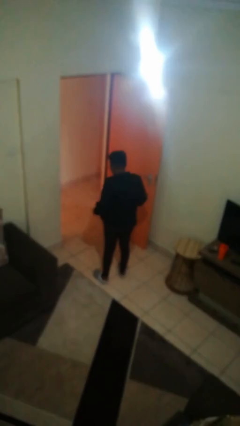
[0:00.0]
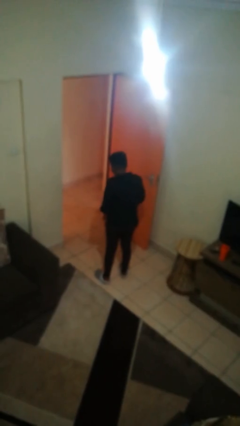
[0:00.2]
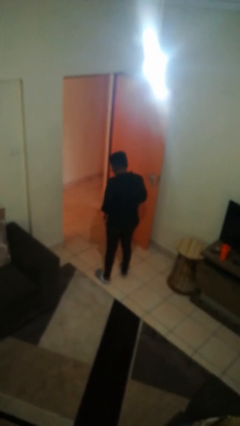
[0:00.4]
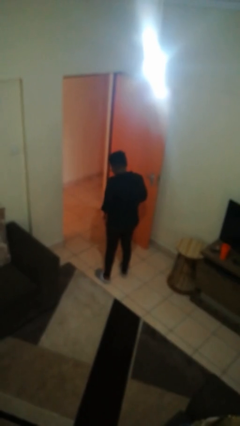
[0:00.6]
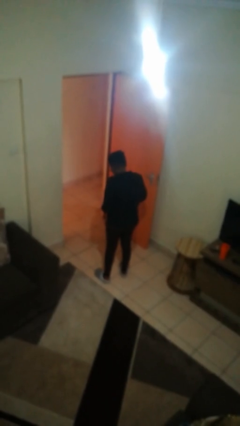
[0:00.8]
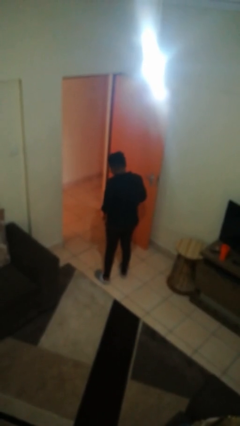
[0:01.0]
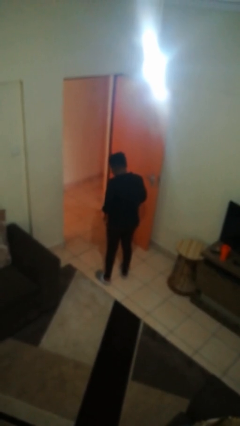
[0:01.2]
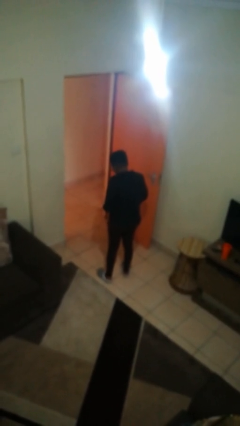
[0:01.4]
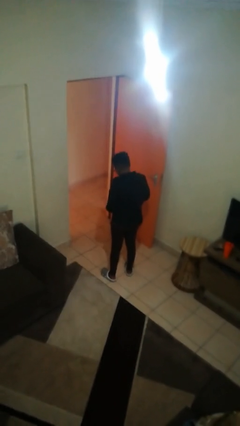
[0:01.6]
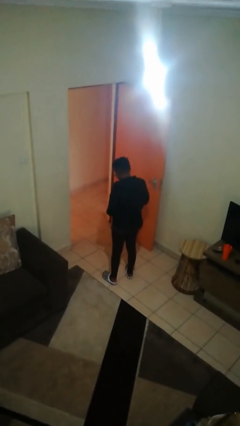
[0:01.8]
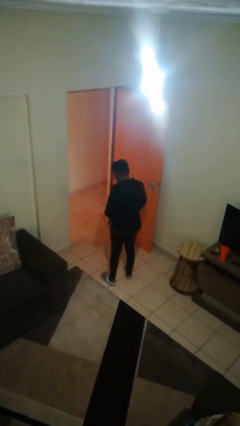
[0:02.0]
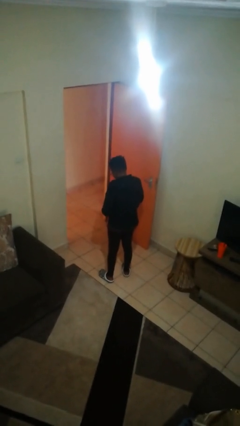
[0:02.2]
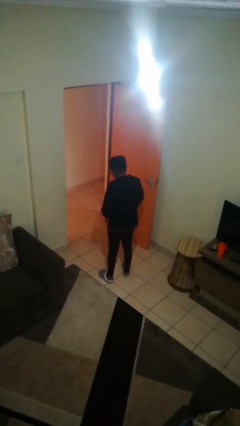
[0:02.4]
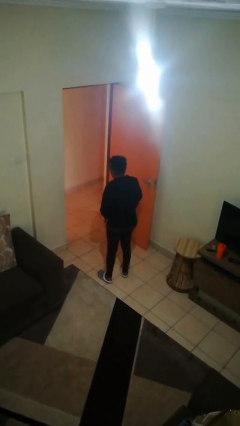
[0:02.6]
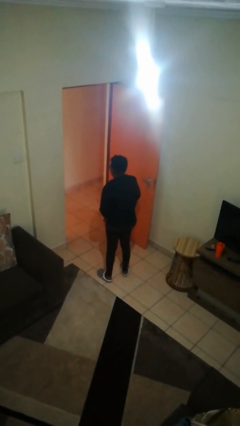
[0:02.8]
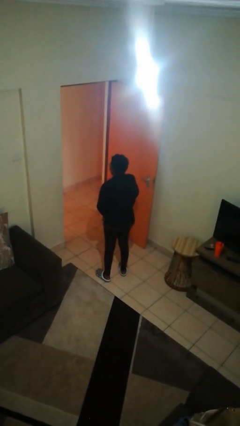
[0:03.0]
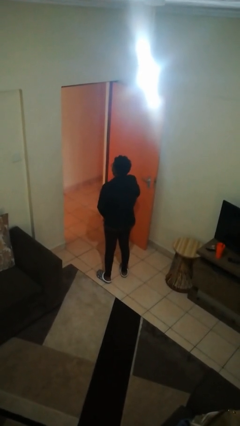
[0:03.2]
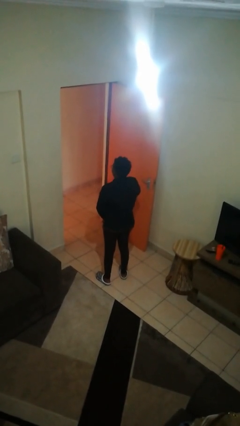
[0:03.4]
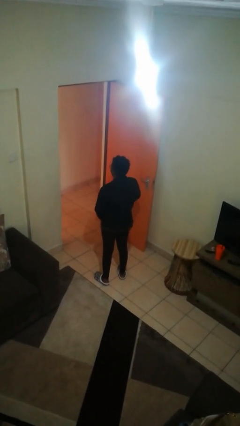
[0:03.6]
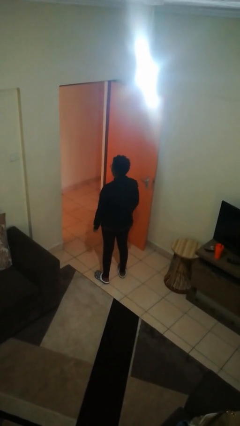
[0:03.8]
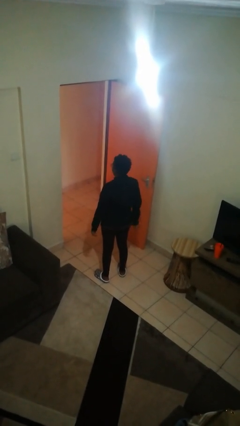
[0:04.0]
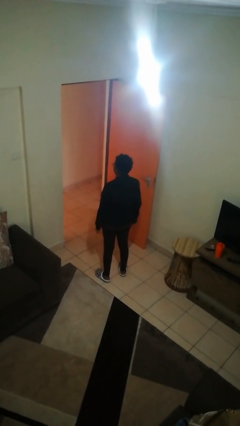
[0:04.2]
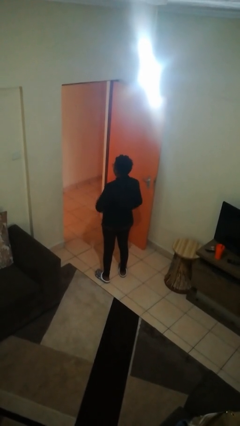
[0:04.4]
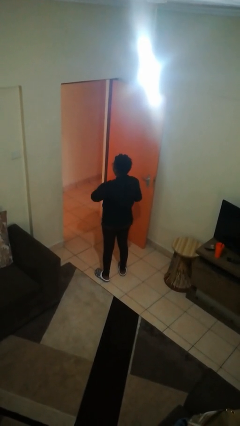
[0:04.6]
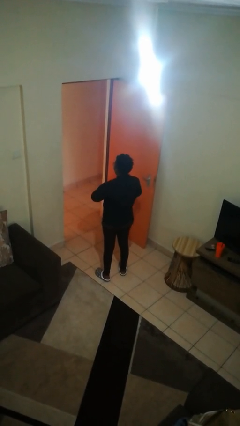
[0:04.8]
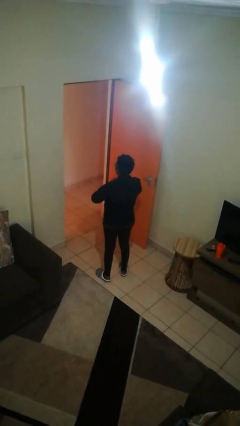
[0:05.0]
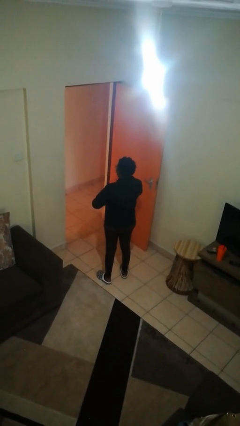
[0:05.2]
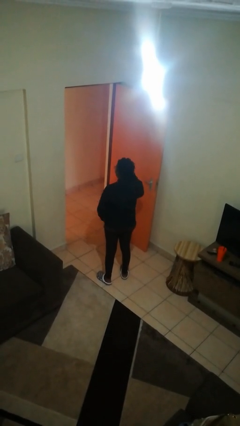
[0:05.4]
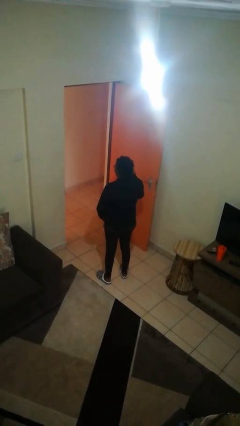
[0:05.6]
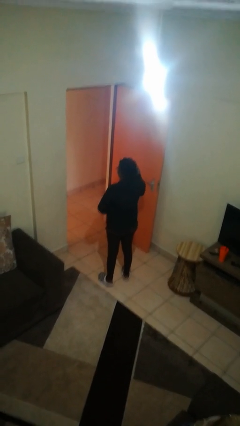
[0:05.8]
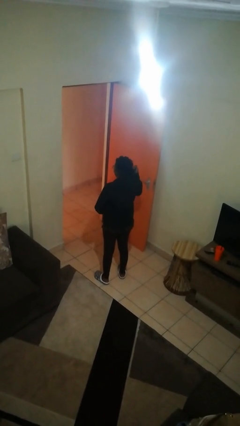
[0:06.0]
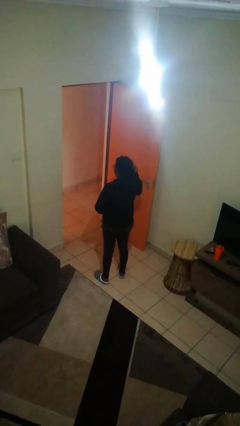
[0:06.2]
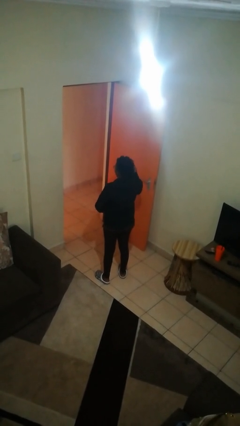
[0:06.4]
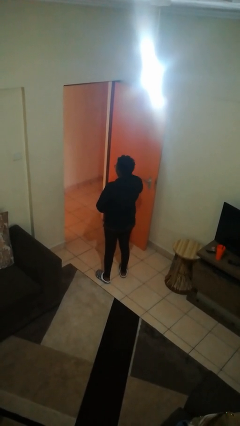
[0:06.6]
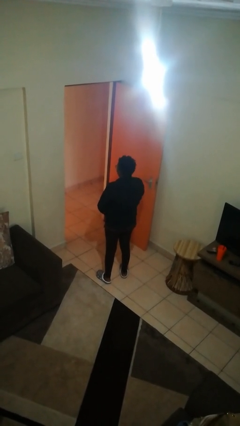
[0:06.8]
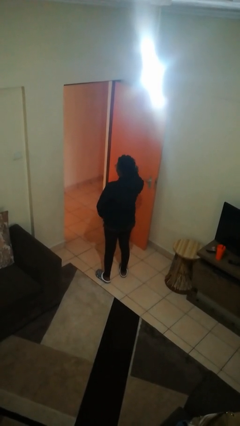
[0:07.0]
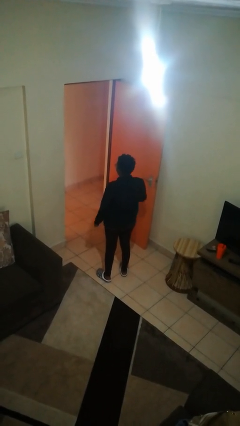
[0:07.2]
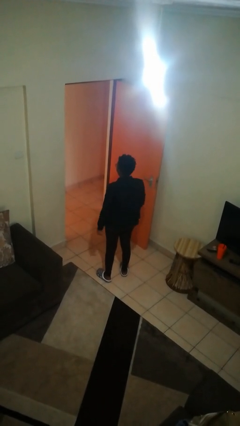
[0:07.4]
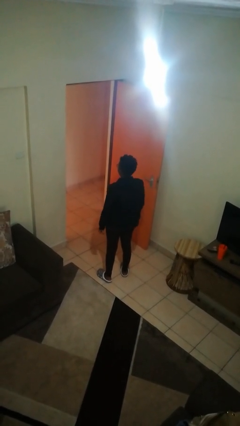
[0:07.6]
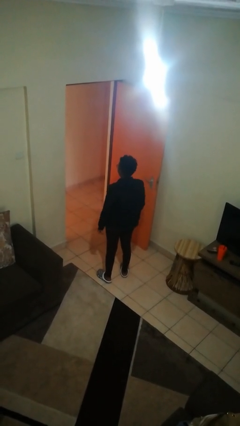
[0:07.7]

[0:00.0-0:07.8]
person zips up jacket

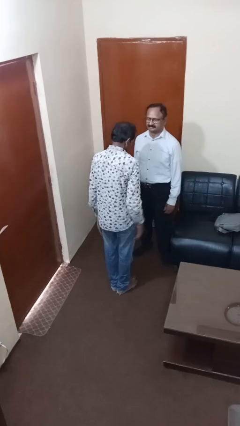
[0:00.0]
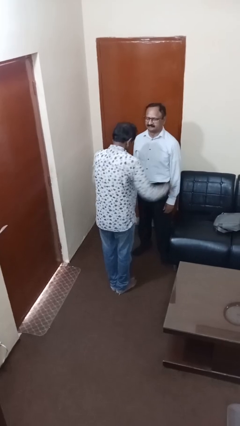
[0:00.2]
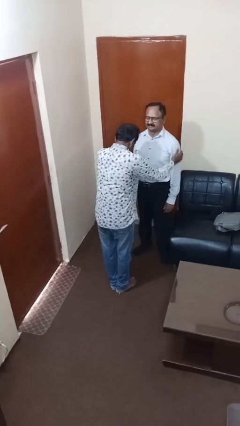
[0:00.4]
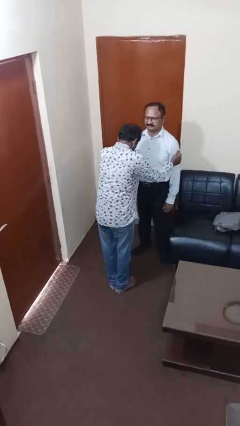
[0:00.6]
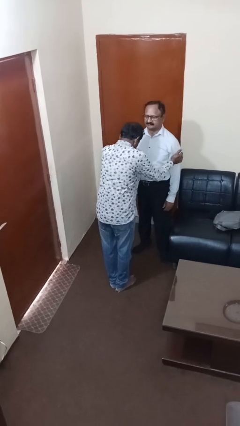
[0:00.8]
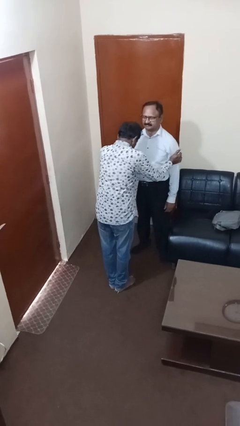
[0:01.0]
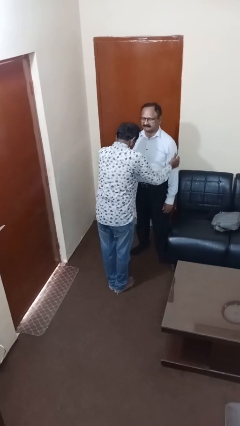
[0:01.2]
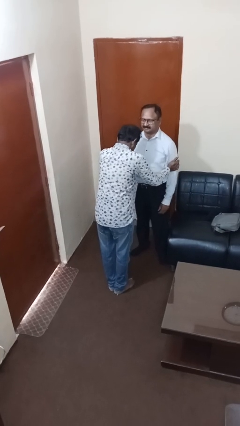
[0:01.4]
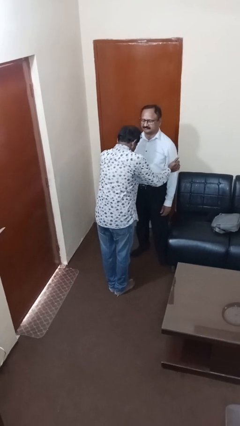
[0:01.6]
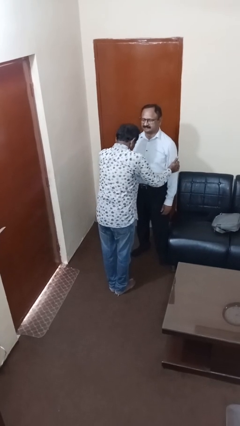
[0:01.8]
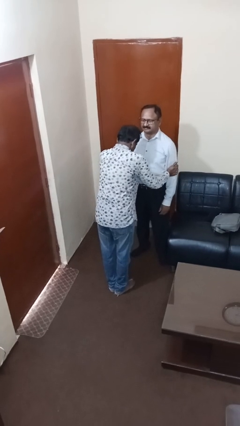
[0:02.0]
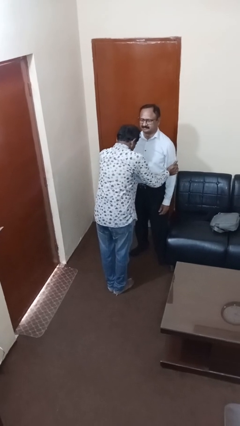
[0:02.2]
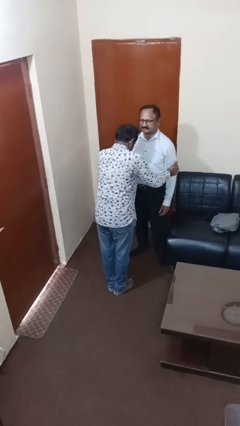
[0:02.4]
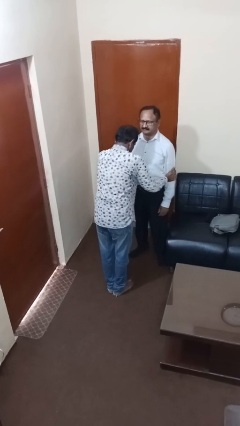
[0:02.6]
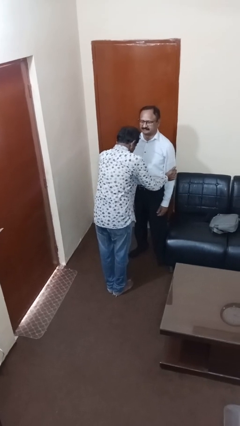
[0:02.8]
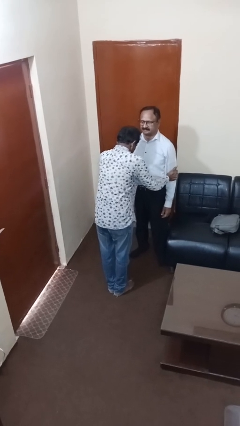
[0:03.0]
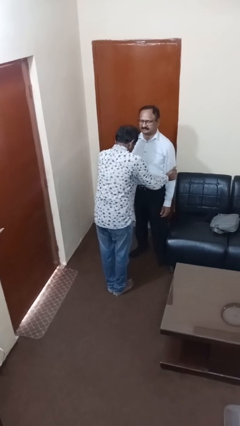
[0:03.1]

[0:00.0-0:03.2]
person grabs person by bicep

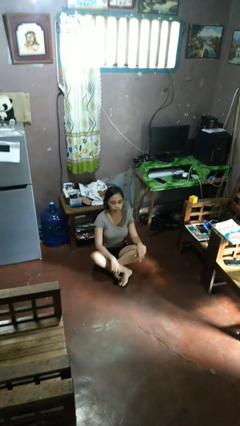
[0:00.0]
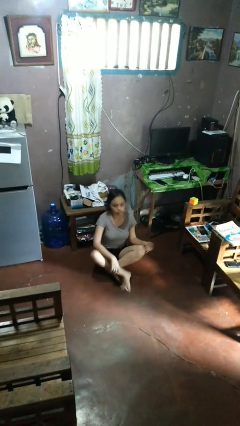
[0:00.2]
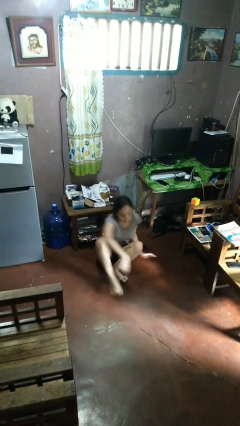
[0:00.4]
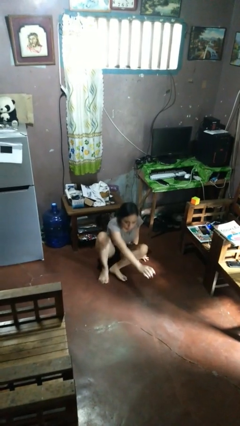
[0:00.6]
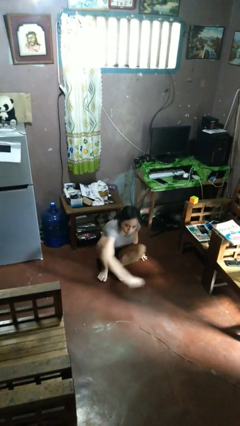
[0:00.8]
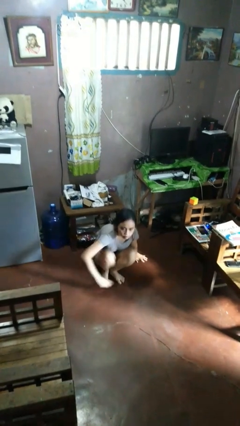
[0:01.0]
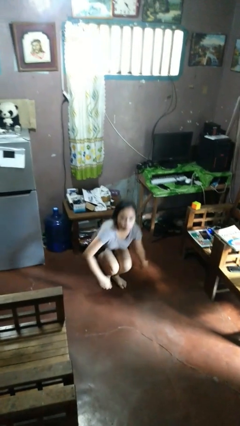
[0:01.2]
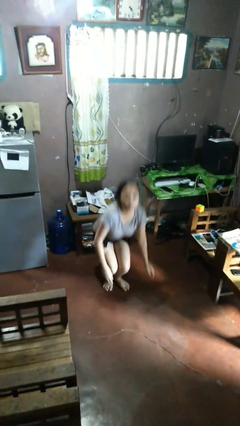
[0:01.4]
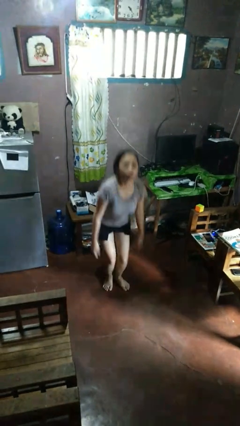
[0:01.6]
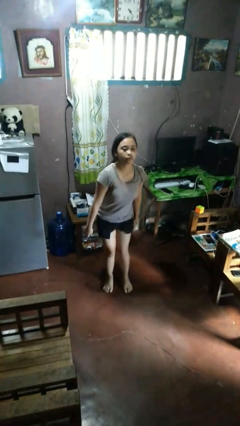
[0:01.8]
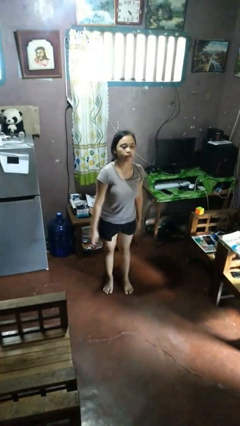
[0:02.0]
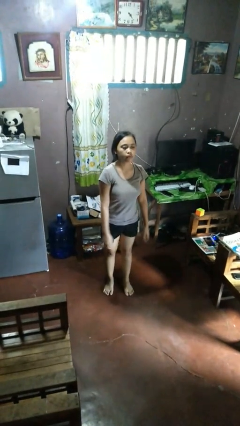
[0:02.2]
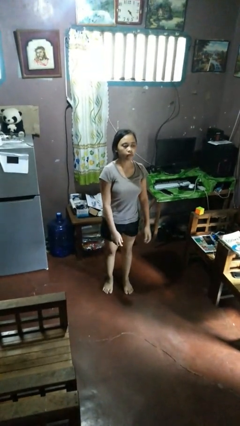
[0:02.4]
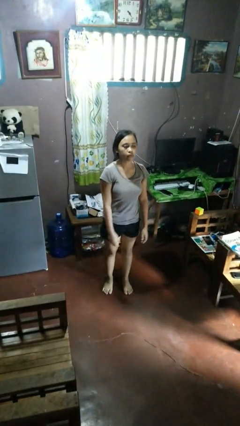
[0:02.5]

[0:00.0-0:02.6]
person stands up from floor

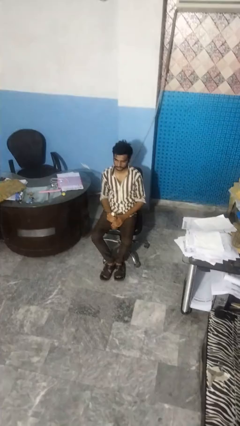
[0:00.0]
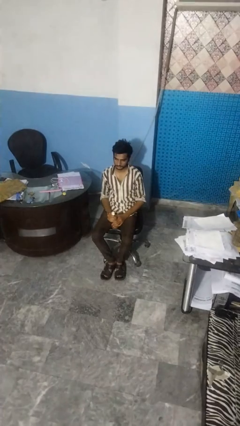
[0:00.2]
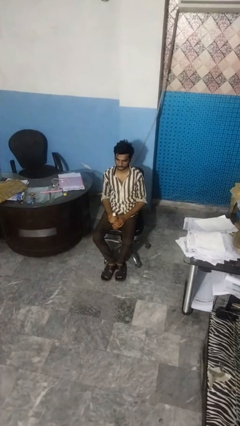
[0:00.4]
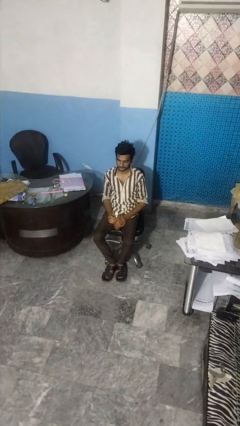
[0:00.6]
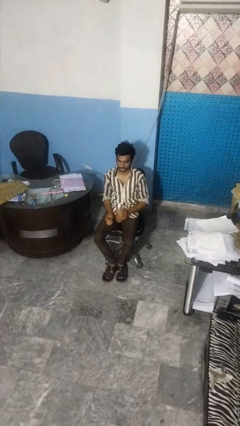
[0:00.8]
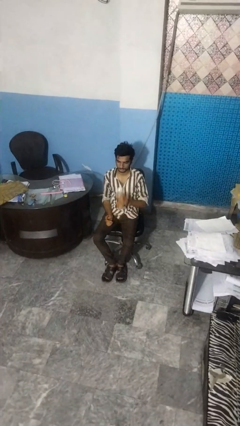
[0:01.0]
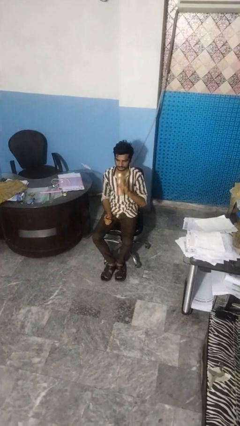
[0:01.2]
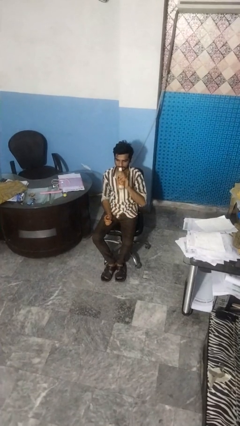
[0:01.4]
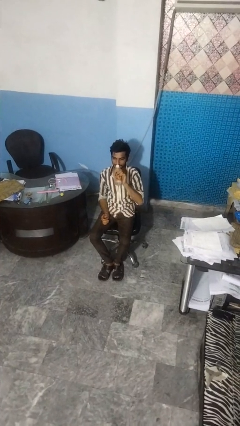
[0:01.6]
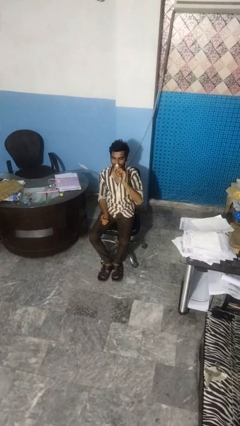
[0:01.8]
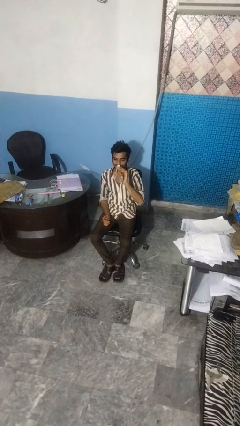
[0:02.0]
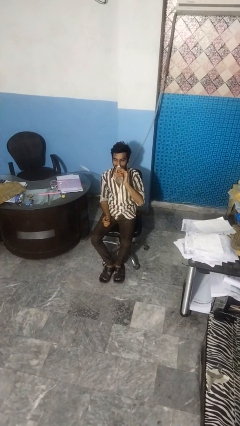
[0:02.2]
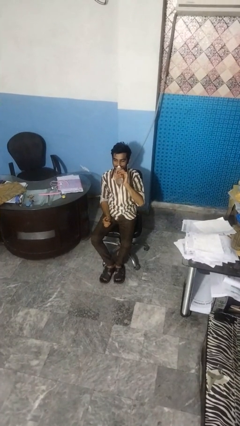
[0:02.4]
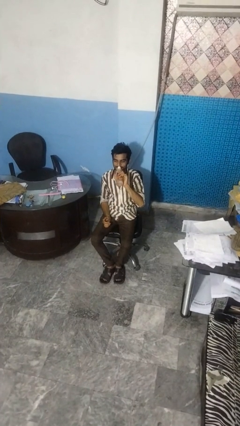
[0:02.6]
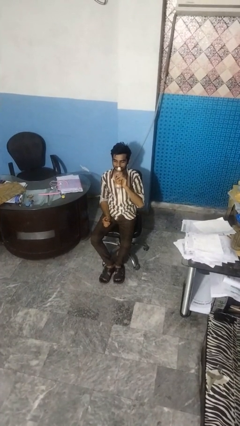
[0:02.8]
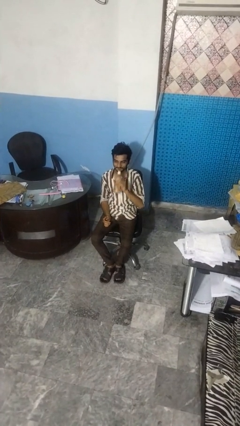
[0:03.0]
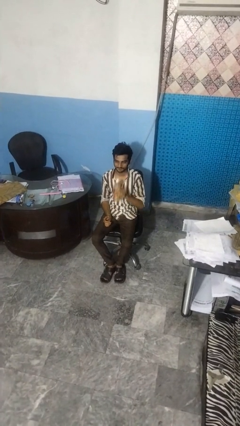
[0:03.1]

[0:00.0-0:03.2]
person drinks from bottle

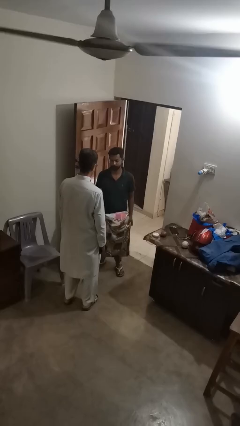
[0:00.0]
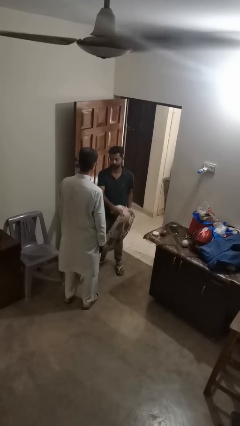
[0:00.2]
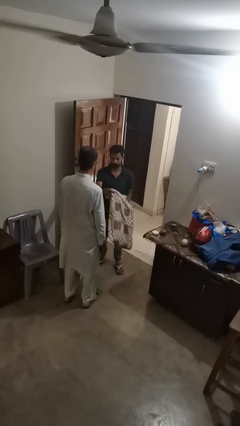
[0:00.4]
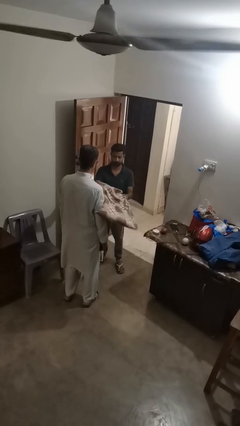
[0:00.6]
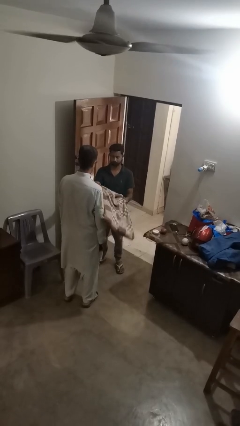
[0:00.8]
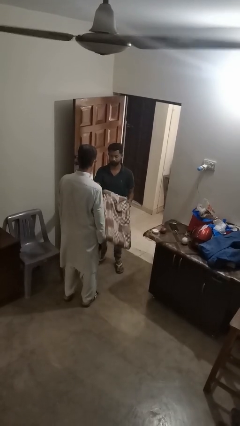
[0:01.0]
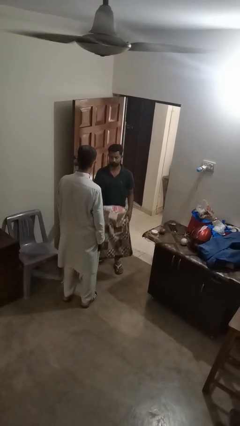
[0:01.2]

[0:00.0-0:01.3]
person hits person with pillow
